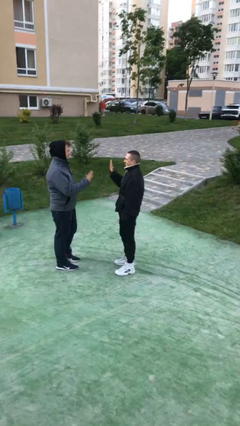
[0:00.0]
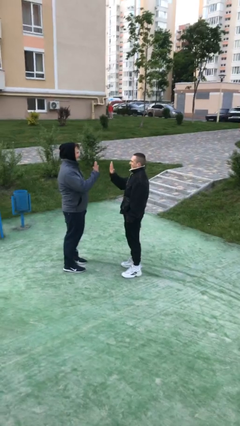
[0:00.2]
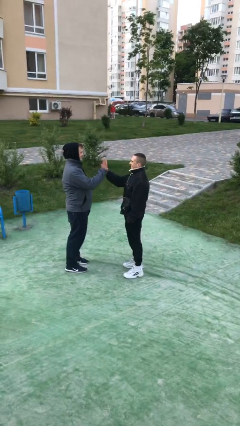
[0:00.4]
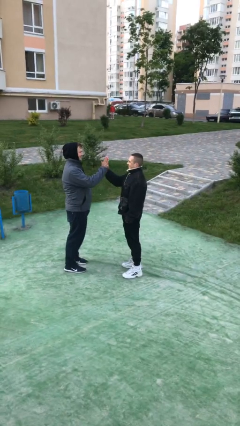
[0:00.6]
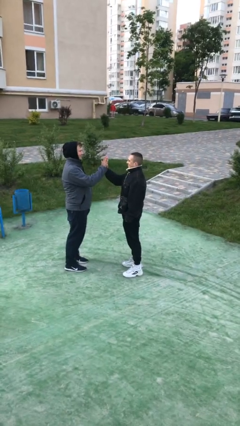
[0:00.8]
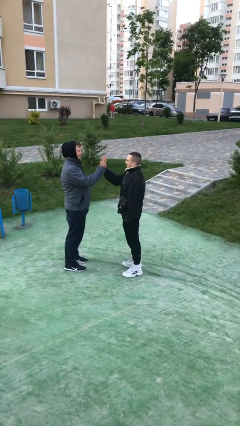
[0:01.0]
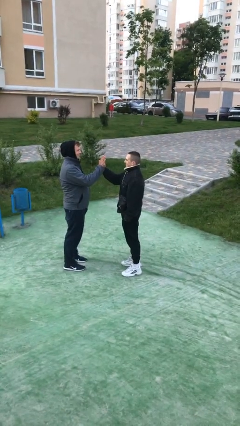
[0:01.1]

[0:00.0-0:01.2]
person highfives hand

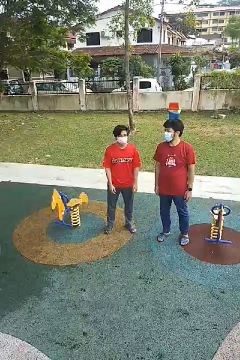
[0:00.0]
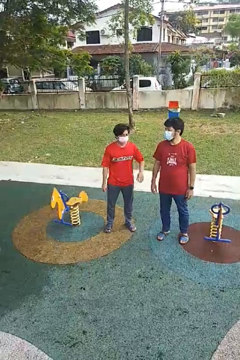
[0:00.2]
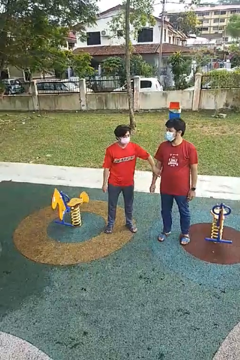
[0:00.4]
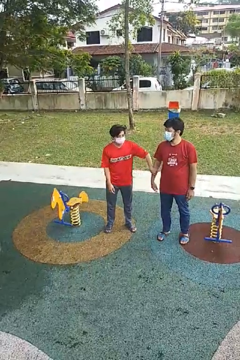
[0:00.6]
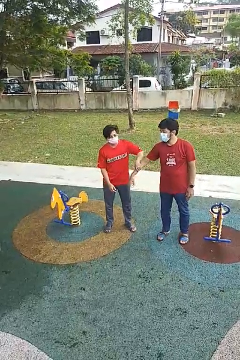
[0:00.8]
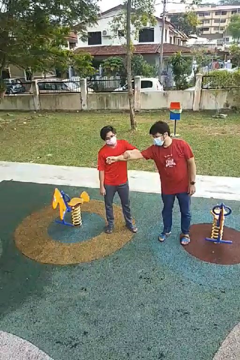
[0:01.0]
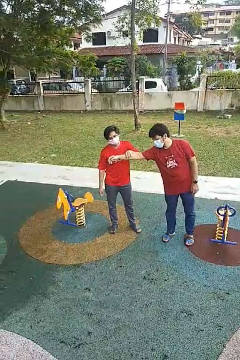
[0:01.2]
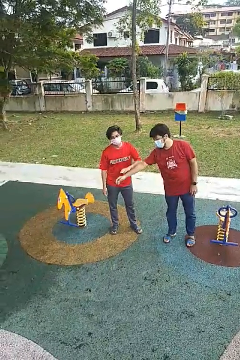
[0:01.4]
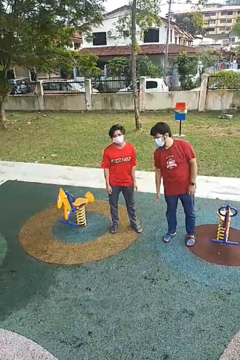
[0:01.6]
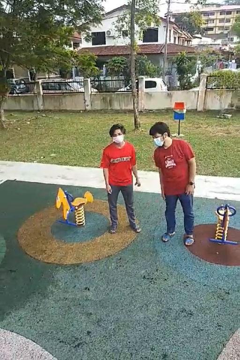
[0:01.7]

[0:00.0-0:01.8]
person grabs person by forearm

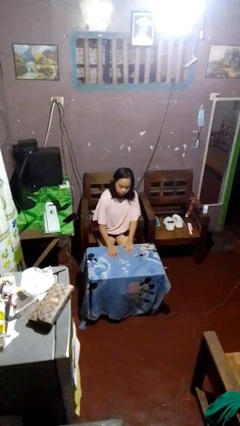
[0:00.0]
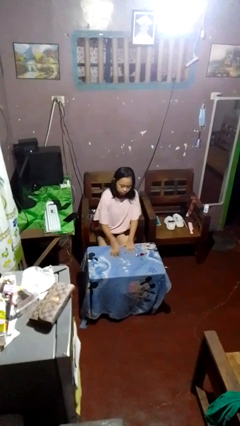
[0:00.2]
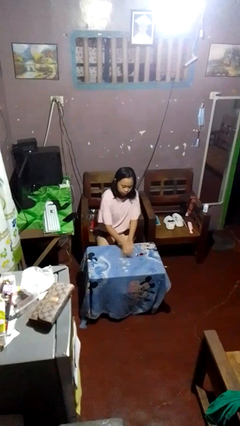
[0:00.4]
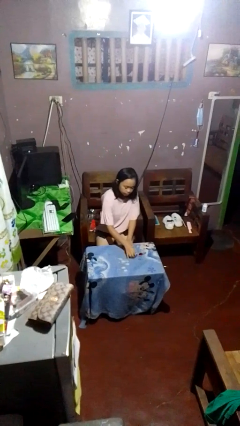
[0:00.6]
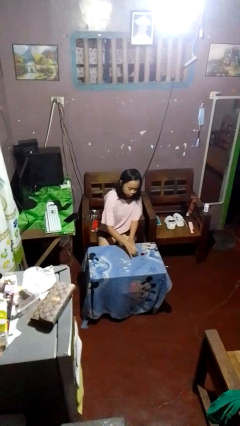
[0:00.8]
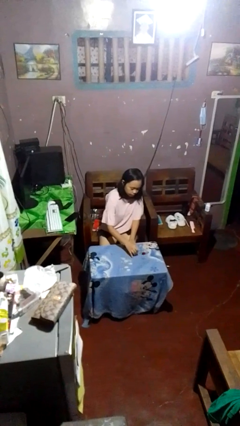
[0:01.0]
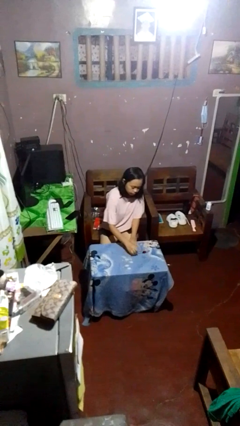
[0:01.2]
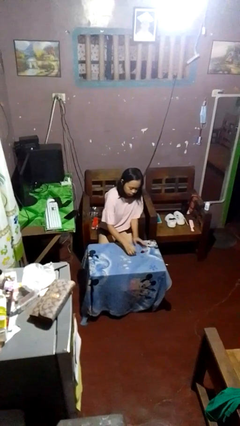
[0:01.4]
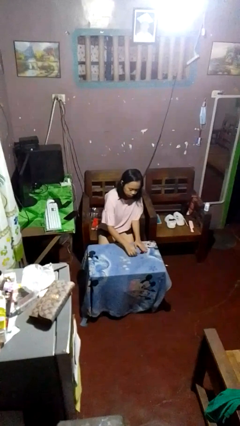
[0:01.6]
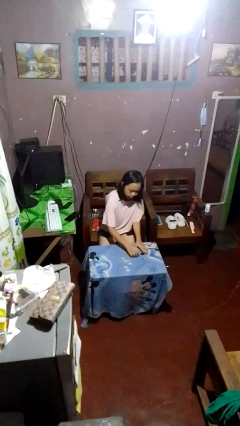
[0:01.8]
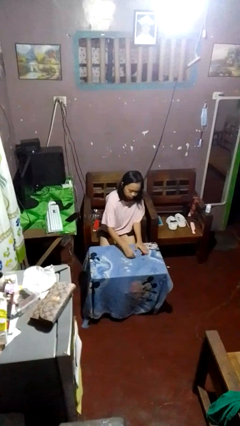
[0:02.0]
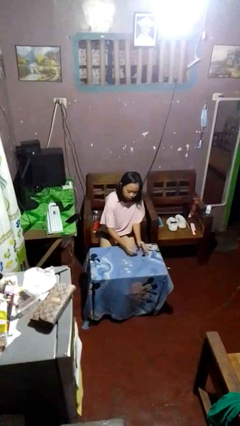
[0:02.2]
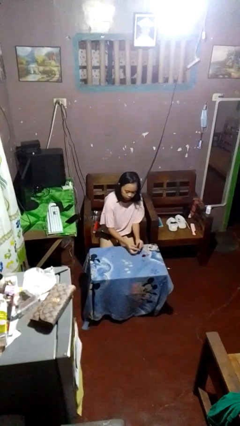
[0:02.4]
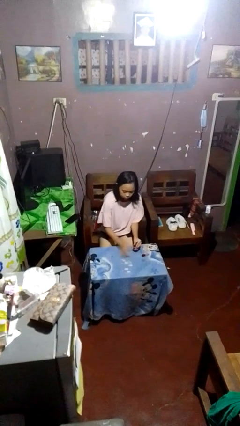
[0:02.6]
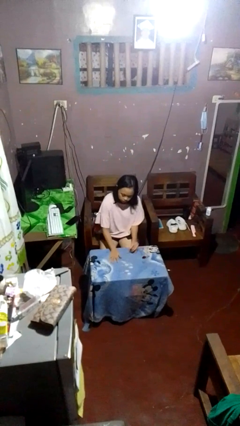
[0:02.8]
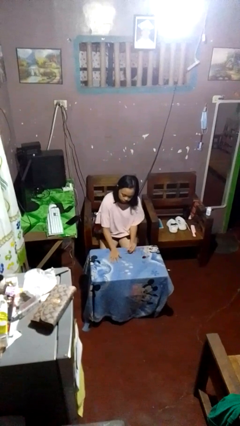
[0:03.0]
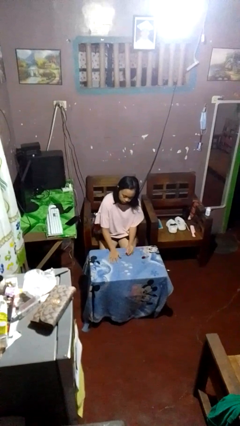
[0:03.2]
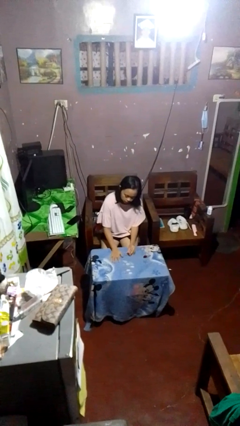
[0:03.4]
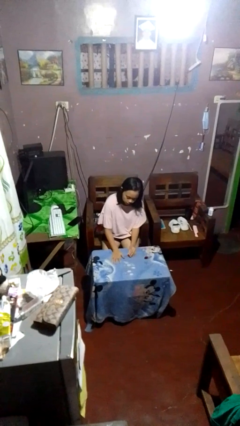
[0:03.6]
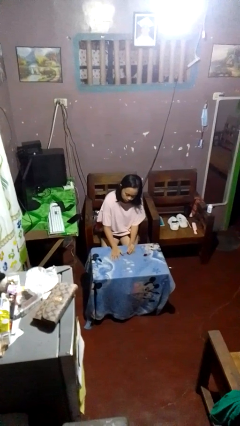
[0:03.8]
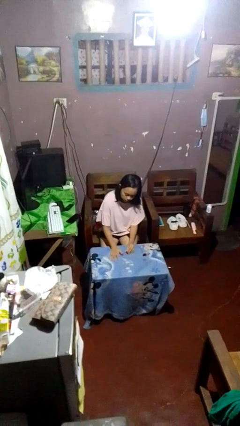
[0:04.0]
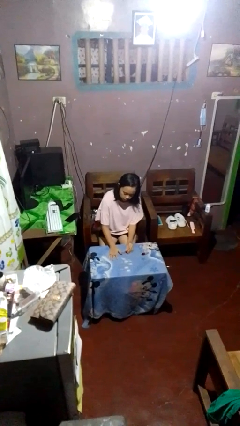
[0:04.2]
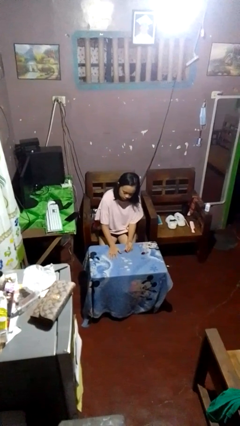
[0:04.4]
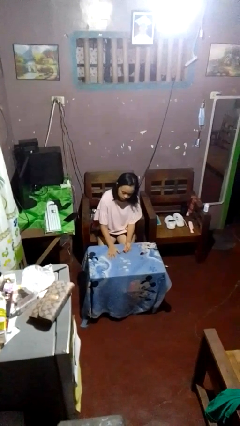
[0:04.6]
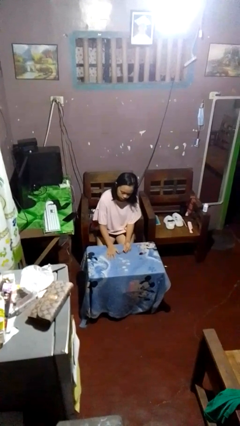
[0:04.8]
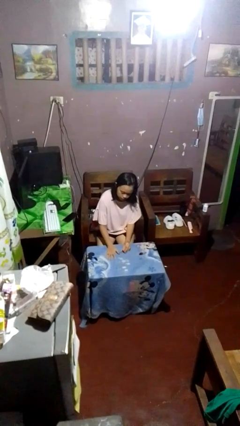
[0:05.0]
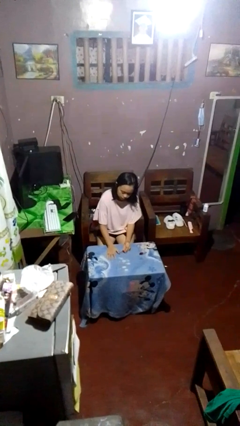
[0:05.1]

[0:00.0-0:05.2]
person paints fingernails

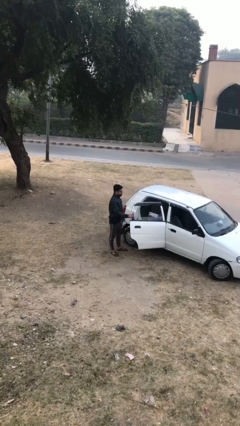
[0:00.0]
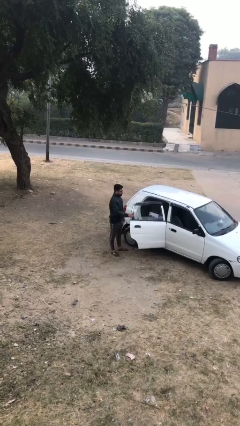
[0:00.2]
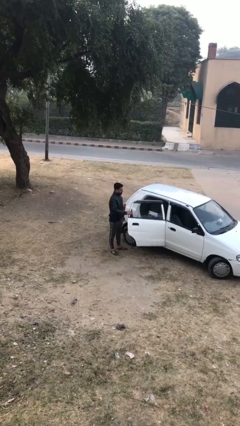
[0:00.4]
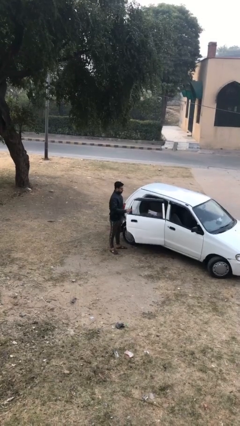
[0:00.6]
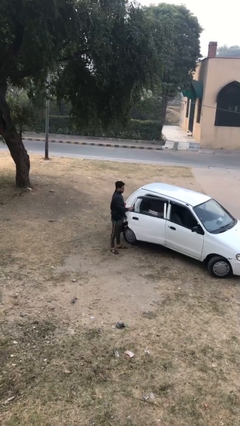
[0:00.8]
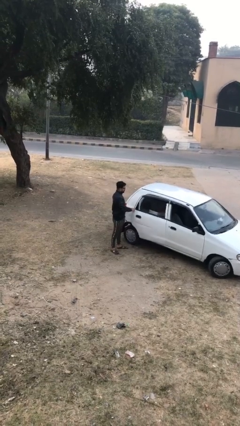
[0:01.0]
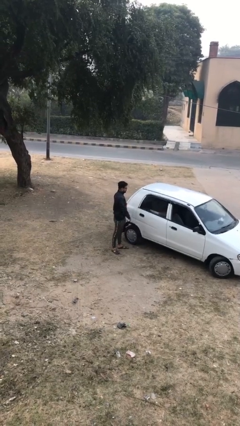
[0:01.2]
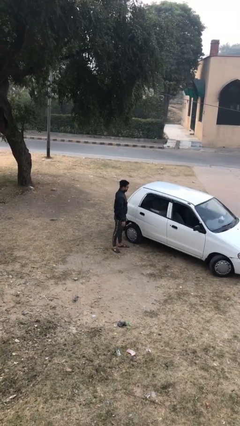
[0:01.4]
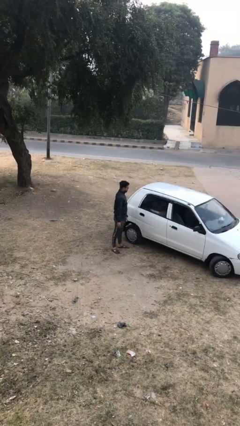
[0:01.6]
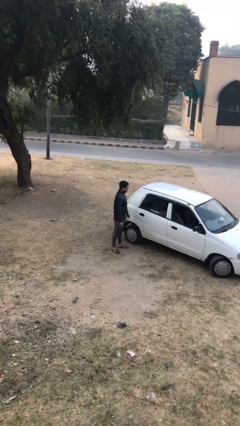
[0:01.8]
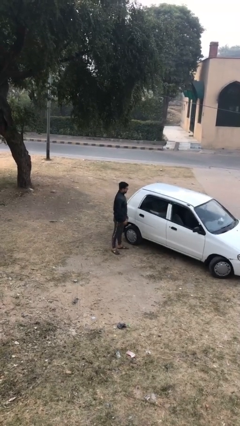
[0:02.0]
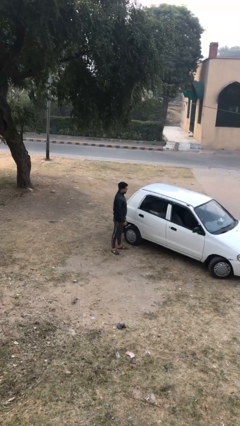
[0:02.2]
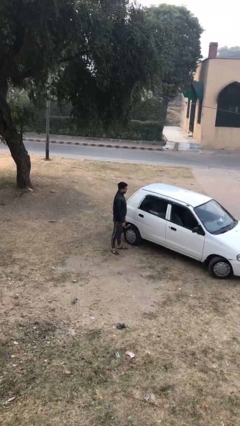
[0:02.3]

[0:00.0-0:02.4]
person closes car door

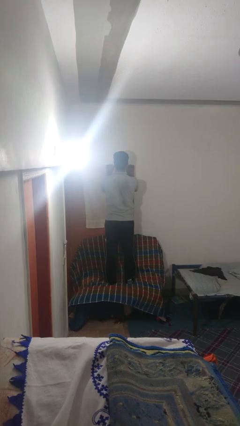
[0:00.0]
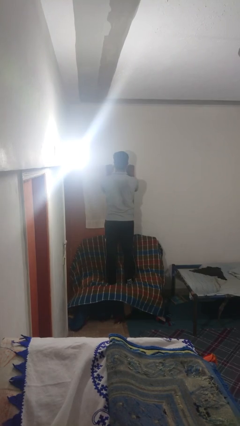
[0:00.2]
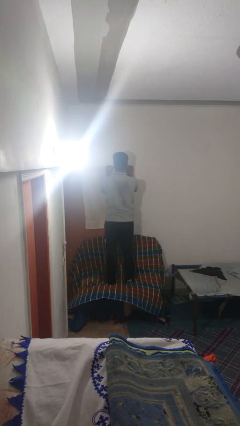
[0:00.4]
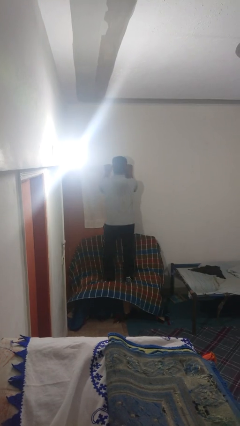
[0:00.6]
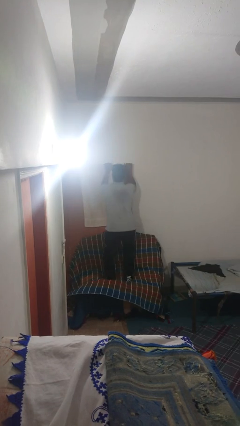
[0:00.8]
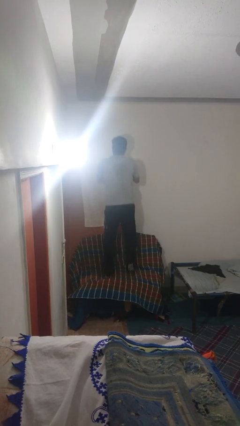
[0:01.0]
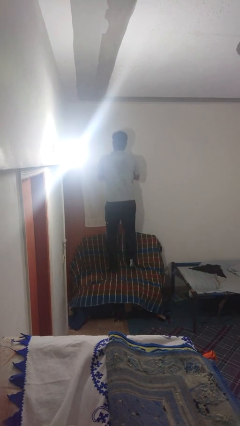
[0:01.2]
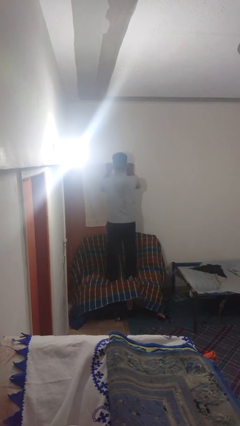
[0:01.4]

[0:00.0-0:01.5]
person jumps on couch

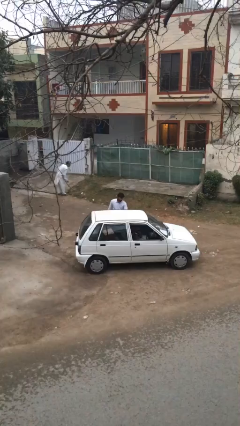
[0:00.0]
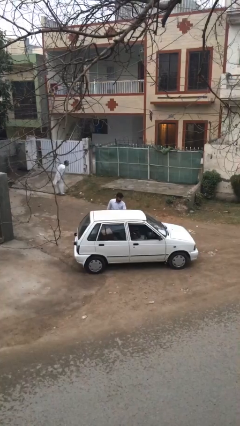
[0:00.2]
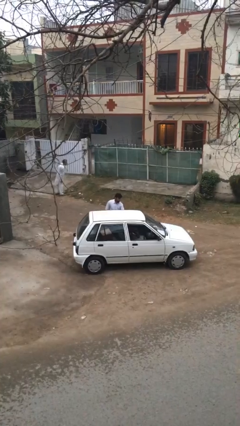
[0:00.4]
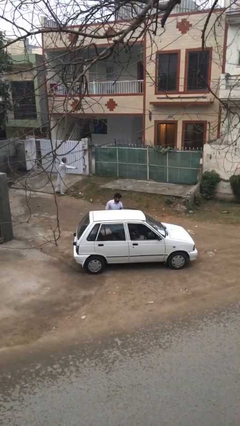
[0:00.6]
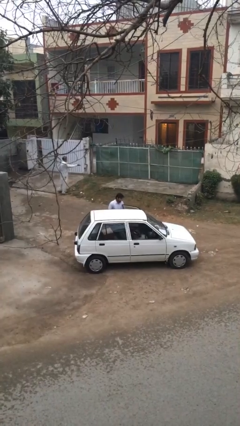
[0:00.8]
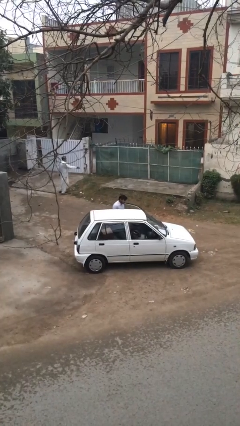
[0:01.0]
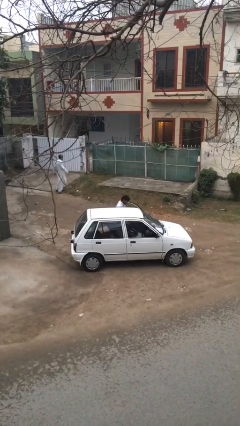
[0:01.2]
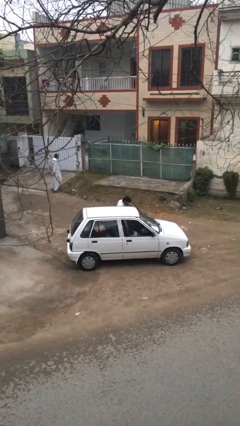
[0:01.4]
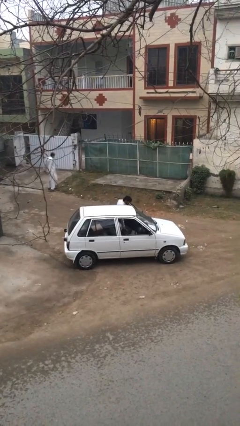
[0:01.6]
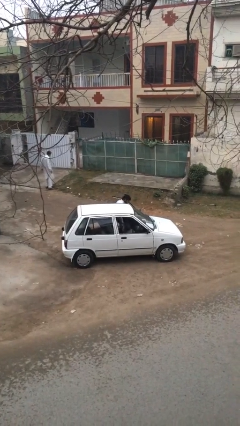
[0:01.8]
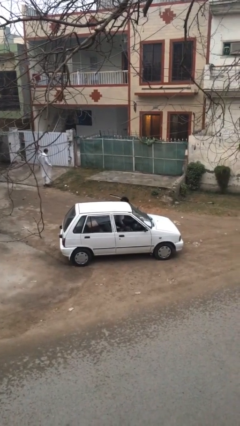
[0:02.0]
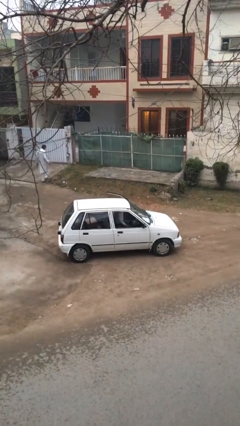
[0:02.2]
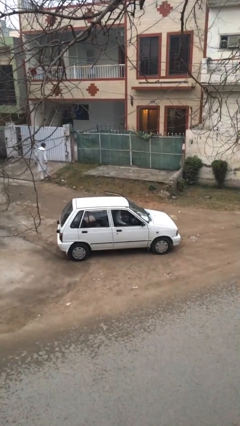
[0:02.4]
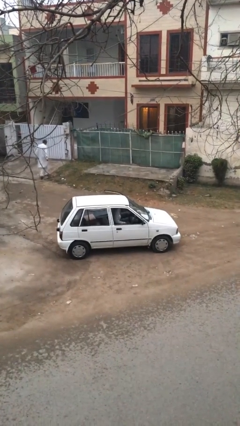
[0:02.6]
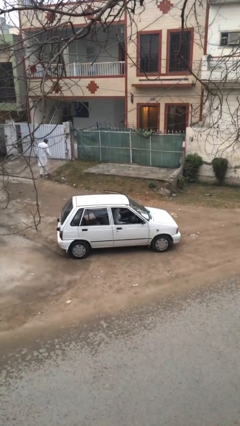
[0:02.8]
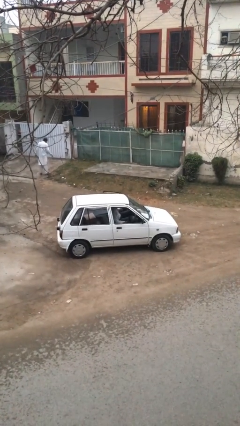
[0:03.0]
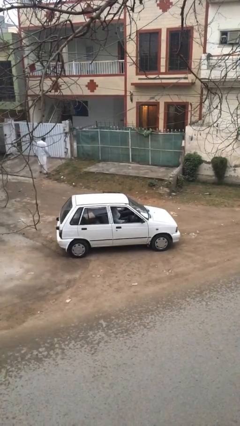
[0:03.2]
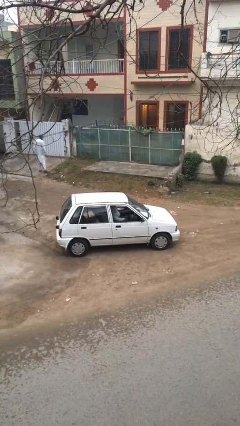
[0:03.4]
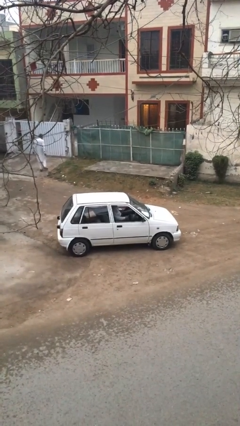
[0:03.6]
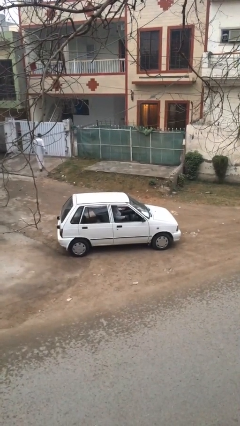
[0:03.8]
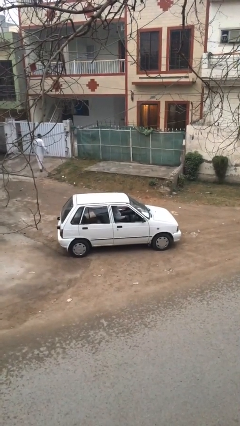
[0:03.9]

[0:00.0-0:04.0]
person enters car

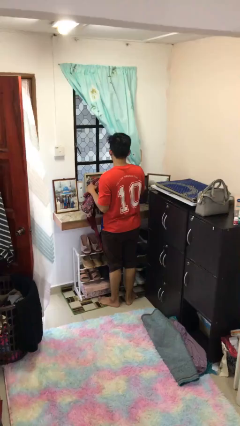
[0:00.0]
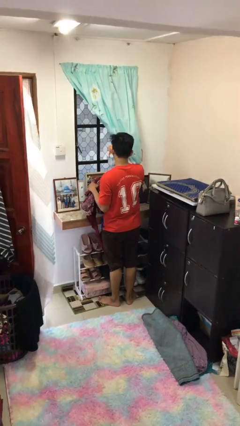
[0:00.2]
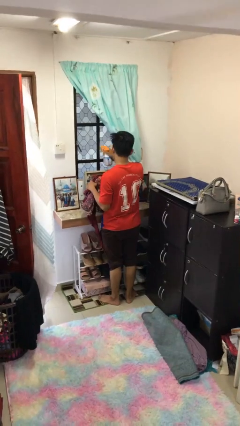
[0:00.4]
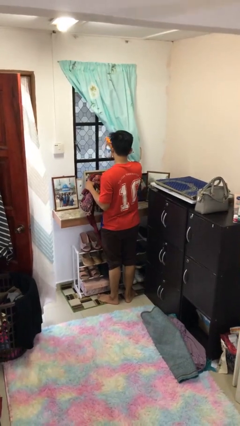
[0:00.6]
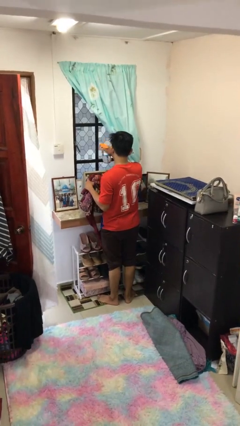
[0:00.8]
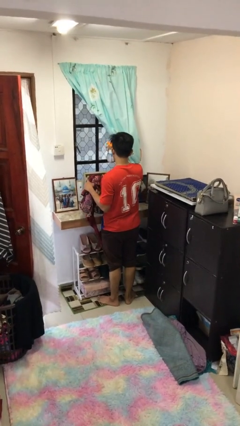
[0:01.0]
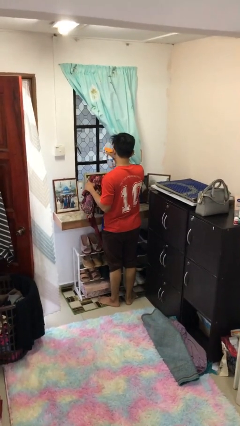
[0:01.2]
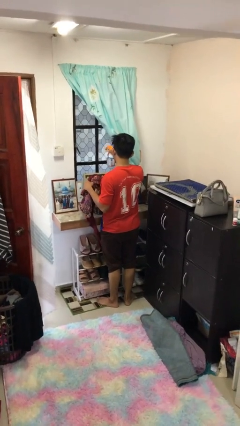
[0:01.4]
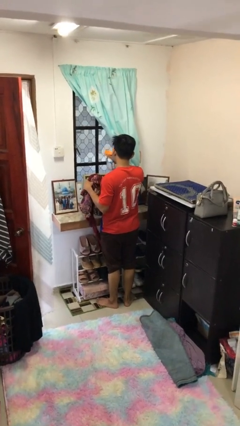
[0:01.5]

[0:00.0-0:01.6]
person sprays from bottle
